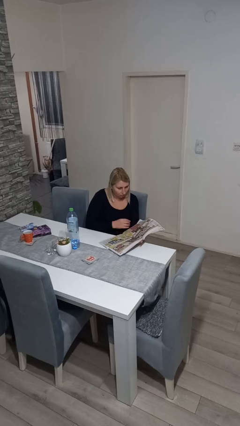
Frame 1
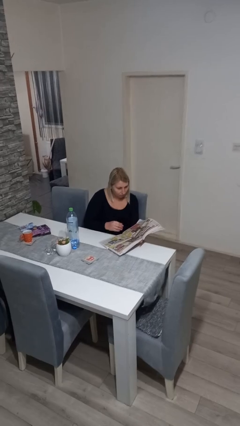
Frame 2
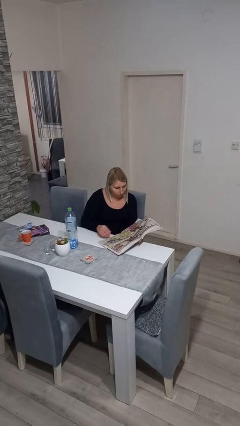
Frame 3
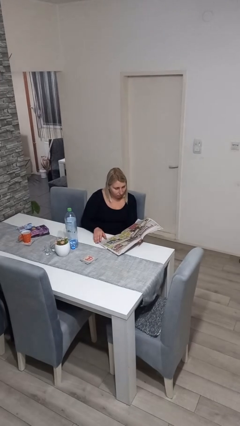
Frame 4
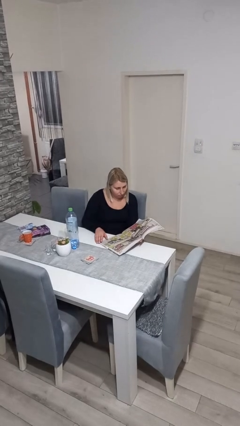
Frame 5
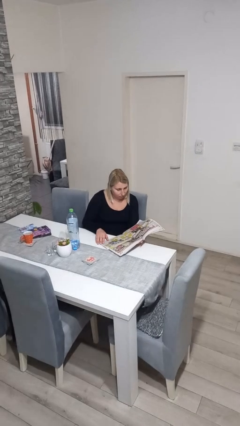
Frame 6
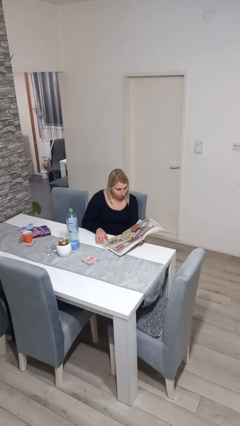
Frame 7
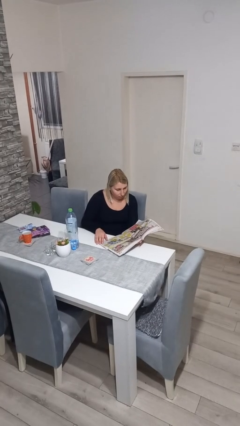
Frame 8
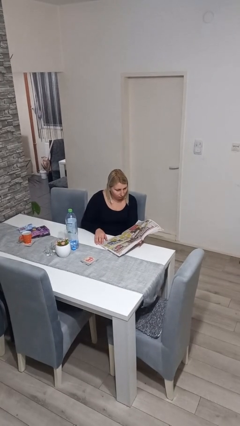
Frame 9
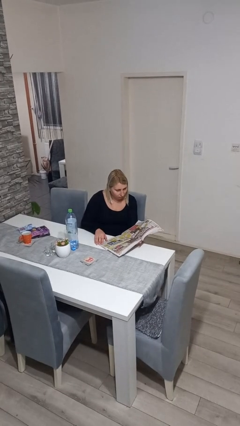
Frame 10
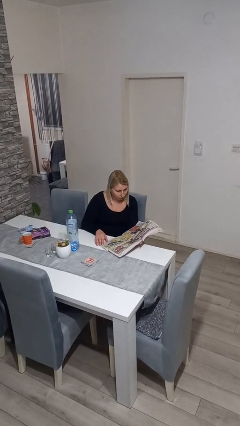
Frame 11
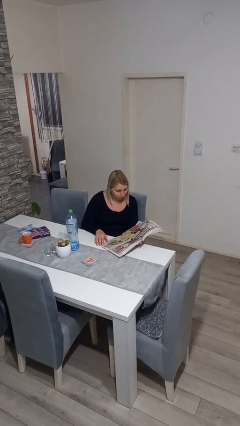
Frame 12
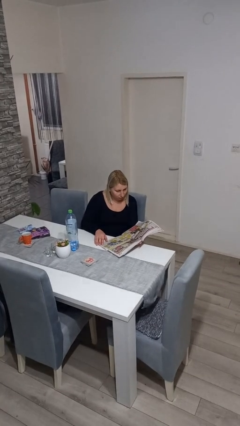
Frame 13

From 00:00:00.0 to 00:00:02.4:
person reads newspaper

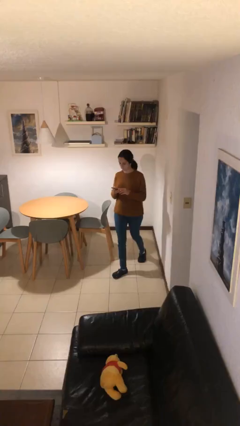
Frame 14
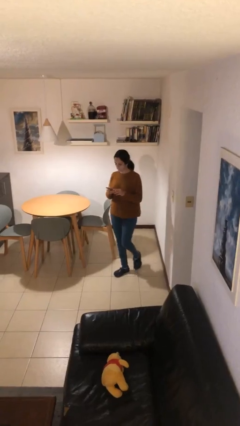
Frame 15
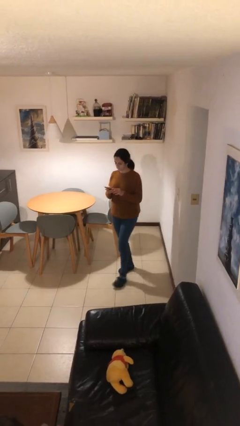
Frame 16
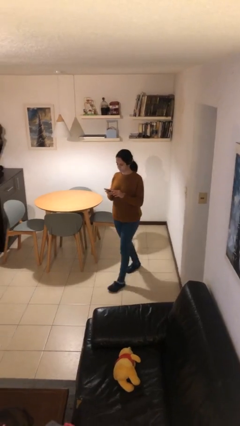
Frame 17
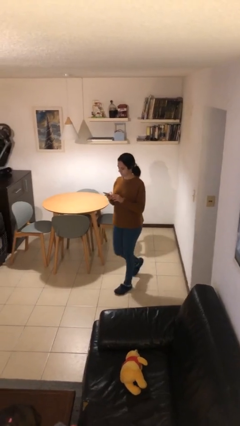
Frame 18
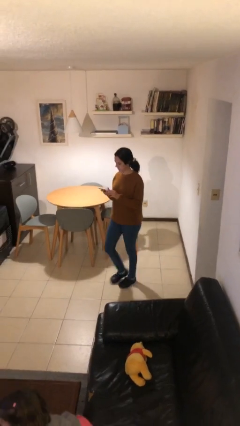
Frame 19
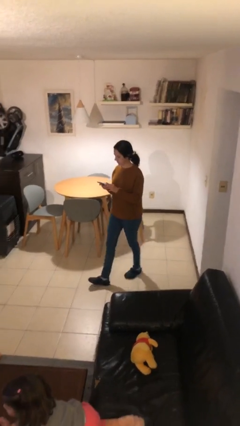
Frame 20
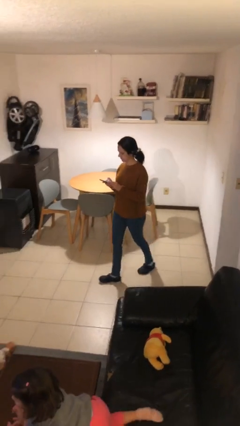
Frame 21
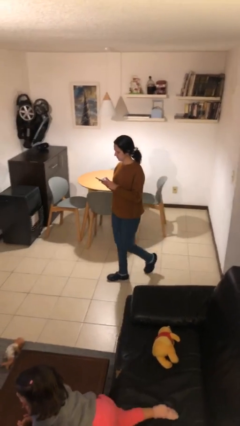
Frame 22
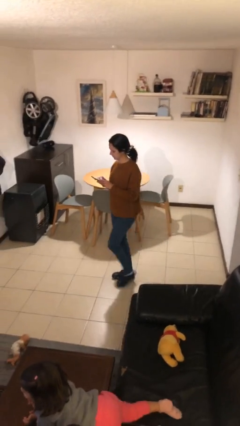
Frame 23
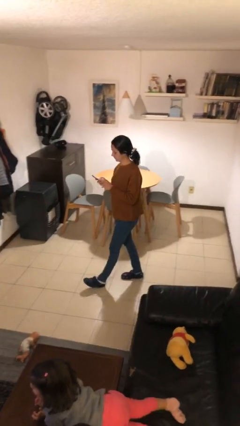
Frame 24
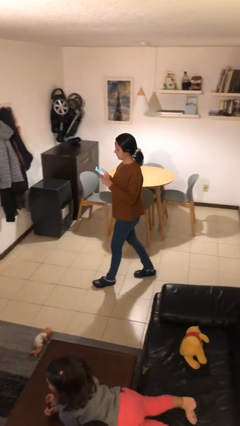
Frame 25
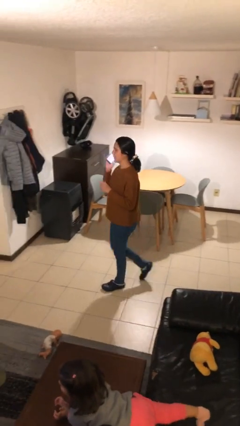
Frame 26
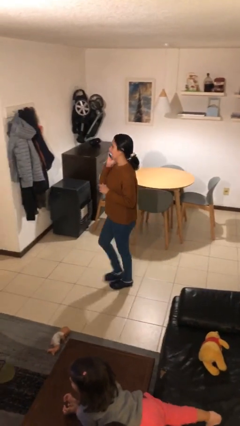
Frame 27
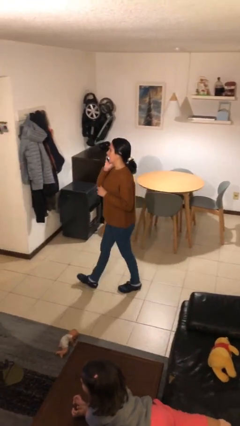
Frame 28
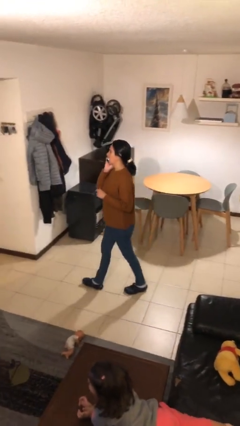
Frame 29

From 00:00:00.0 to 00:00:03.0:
person texts on phone

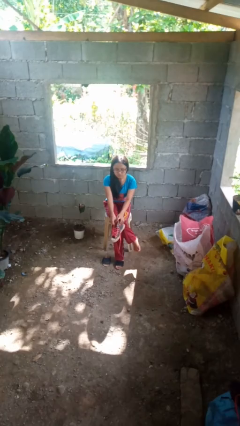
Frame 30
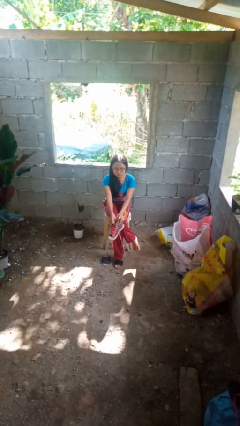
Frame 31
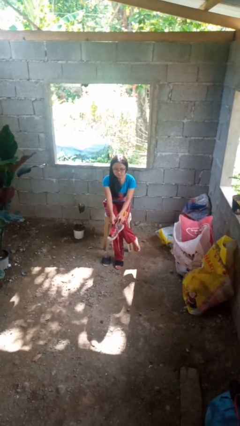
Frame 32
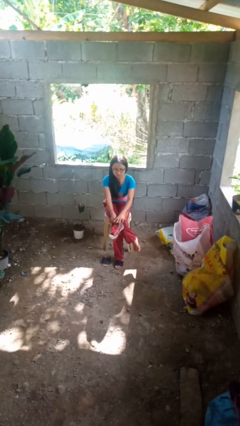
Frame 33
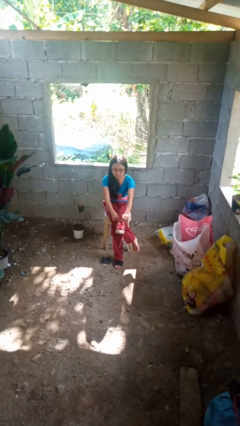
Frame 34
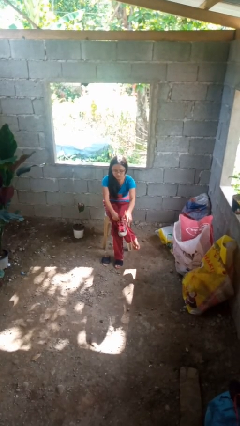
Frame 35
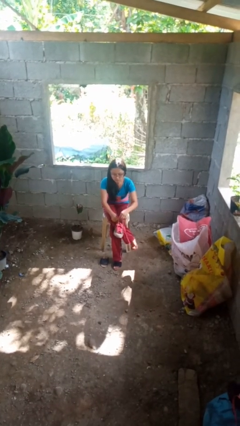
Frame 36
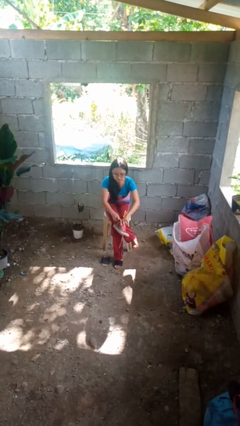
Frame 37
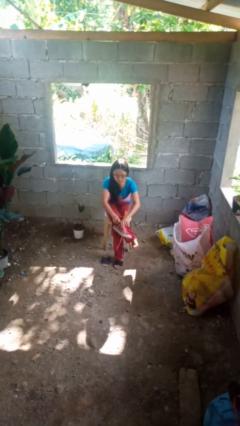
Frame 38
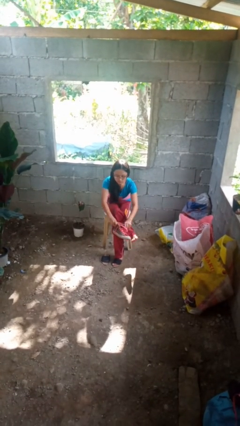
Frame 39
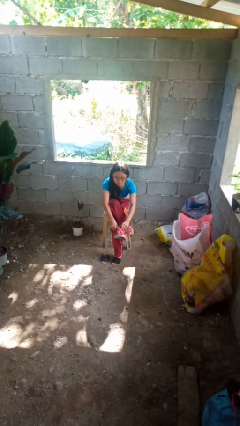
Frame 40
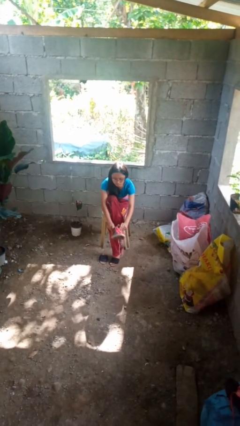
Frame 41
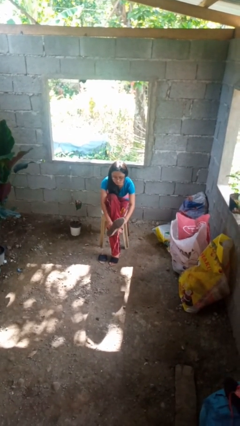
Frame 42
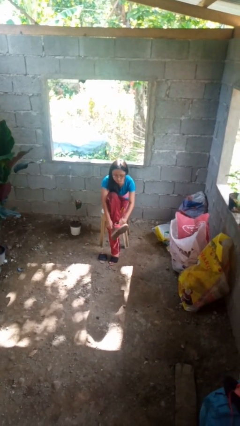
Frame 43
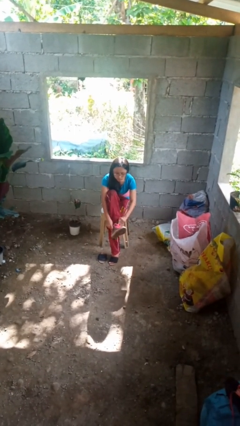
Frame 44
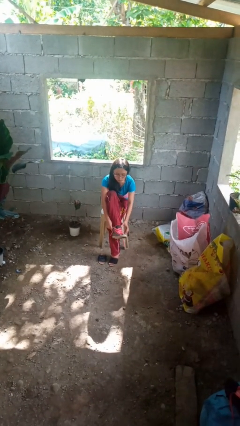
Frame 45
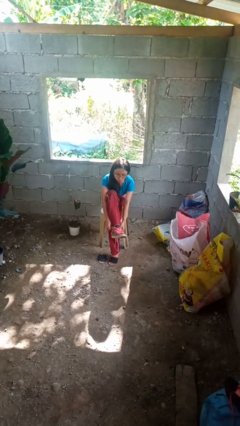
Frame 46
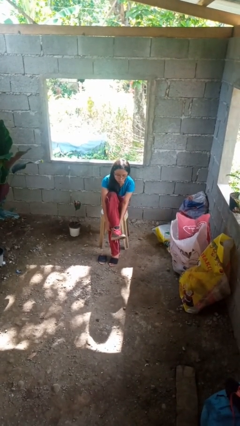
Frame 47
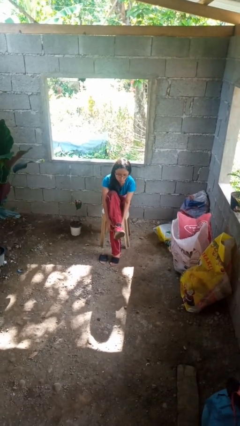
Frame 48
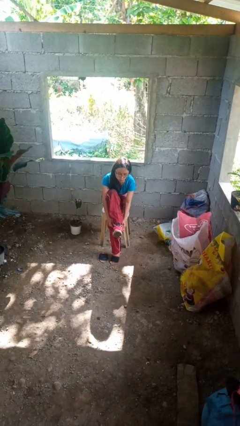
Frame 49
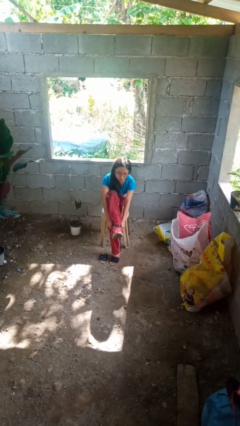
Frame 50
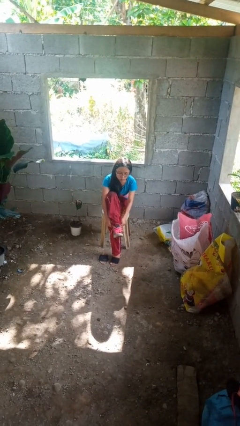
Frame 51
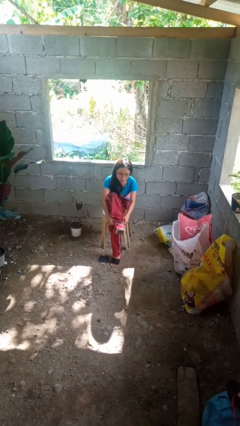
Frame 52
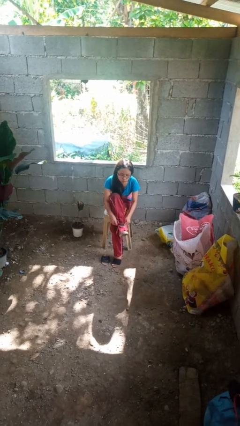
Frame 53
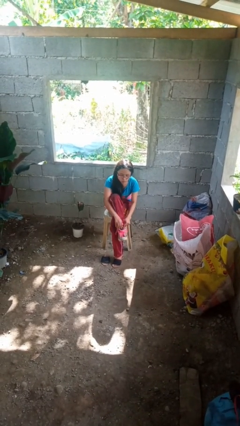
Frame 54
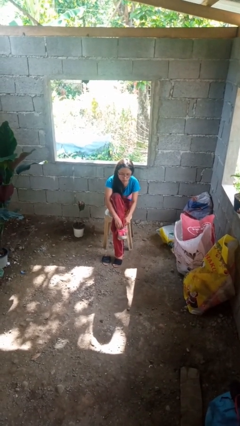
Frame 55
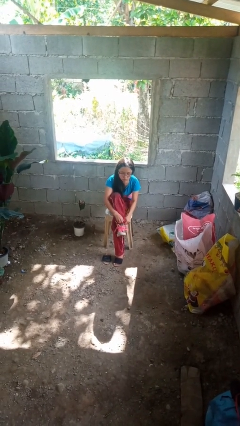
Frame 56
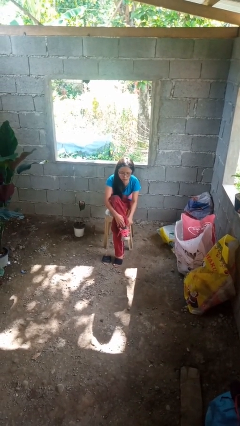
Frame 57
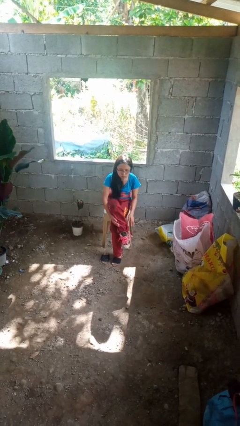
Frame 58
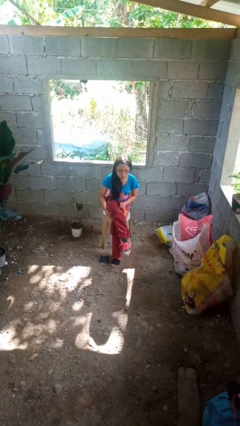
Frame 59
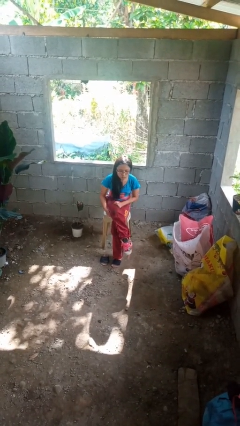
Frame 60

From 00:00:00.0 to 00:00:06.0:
person puts on shoes

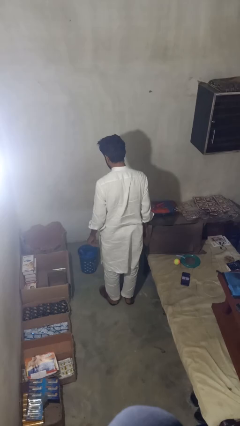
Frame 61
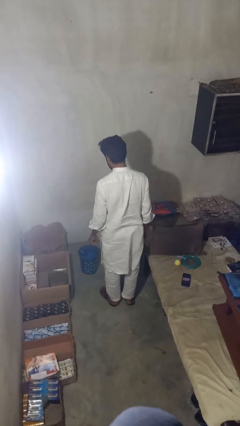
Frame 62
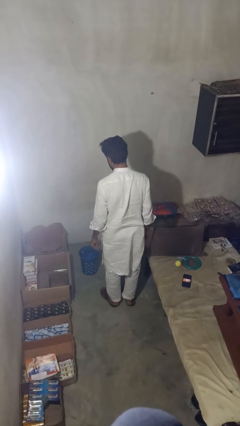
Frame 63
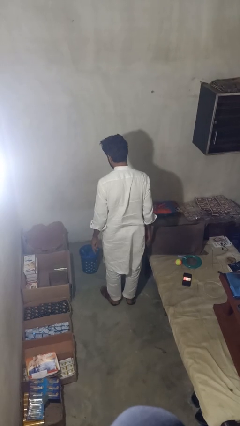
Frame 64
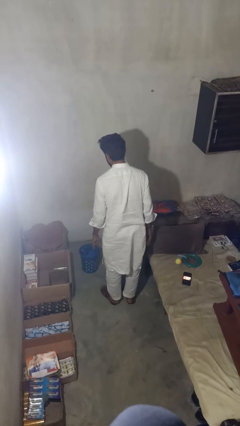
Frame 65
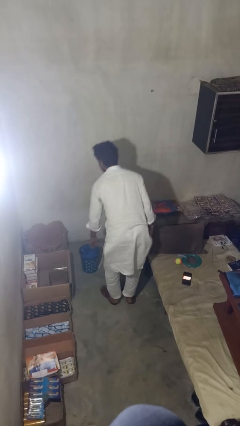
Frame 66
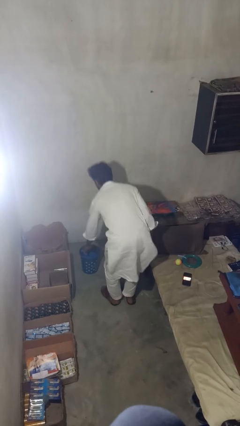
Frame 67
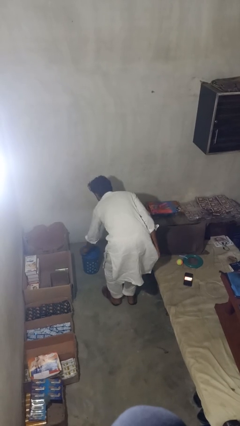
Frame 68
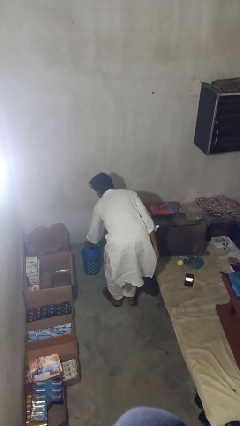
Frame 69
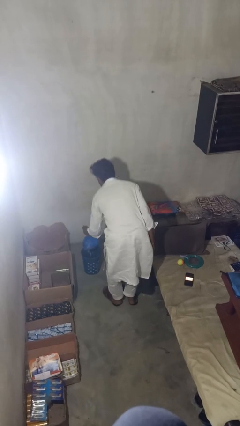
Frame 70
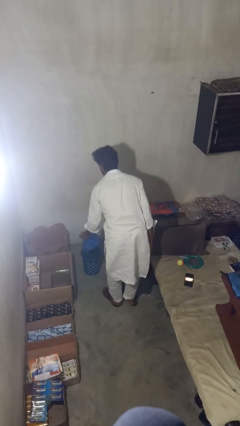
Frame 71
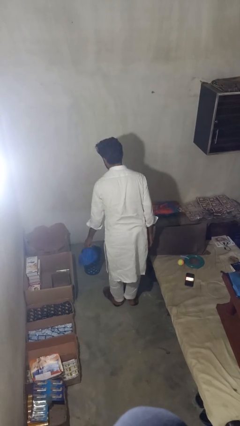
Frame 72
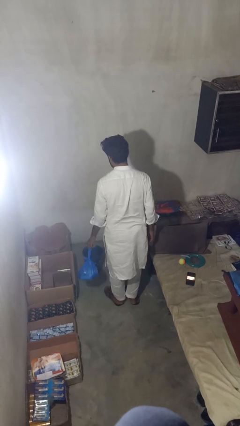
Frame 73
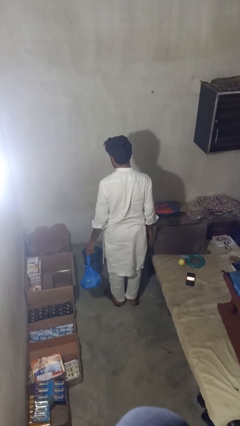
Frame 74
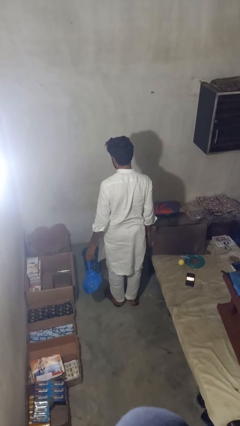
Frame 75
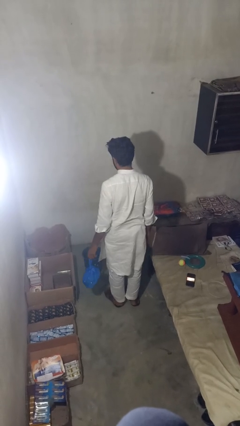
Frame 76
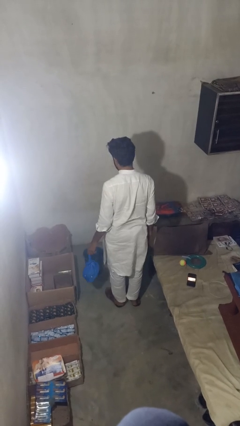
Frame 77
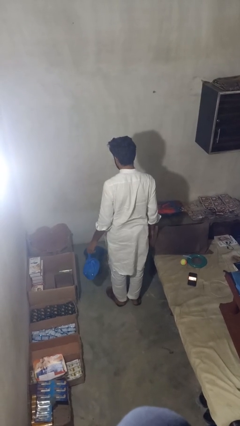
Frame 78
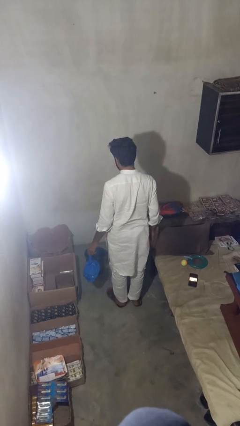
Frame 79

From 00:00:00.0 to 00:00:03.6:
person takes object from basket

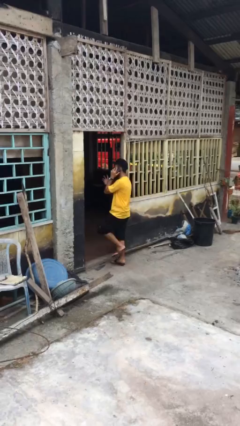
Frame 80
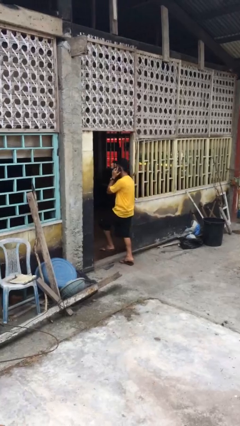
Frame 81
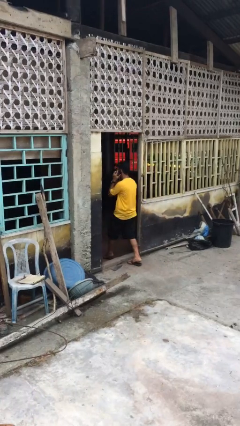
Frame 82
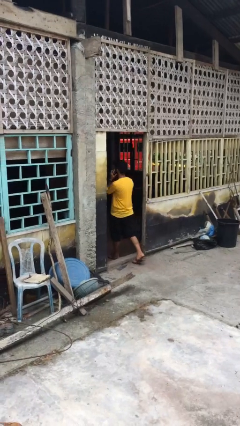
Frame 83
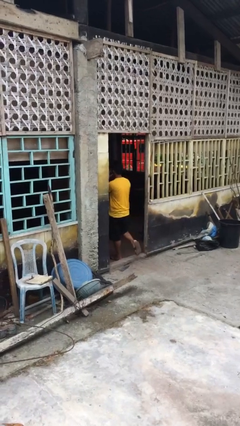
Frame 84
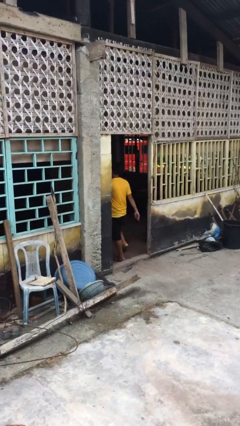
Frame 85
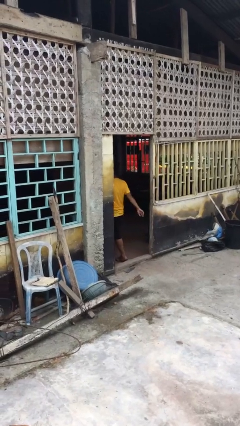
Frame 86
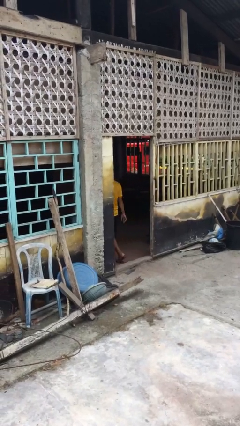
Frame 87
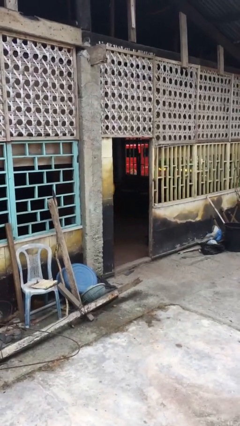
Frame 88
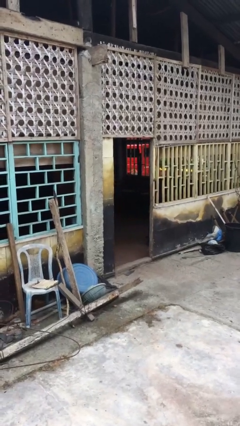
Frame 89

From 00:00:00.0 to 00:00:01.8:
person enters scene through structure

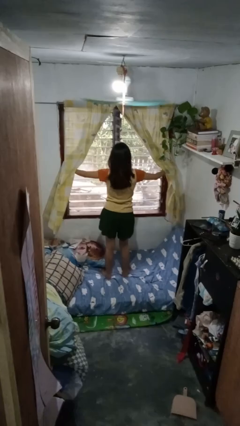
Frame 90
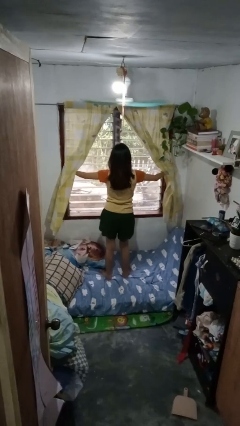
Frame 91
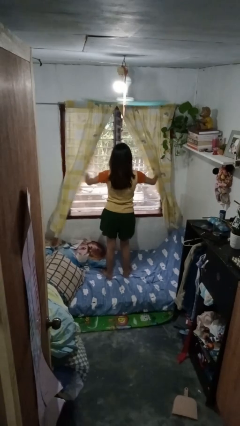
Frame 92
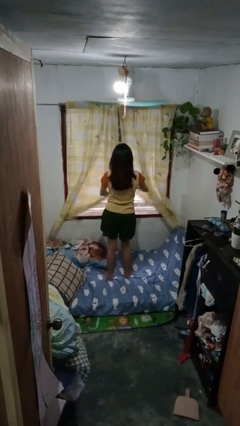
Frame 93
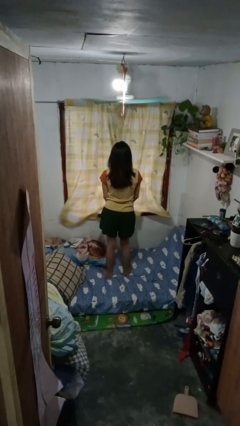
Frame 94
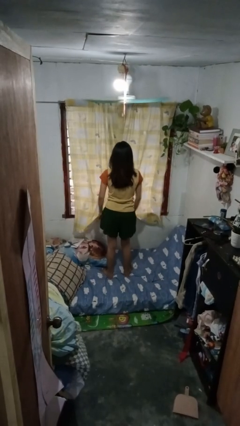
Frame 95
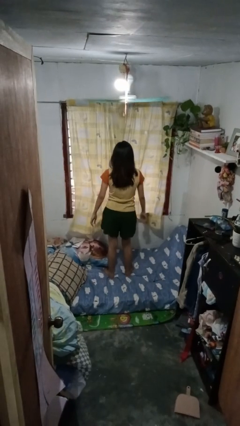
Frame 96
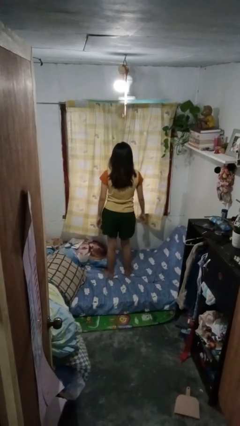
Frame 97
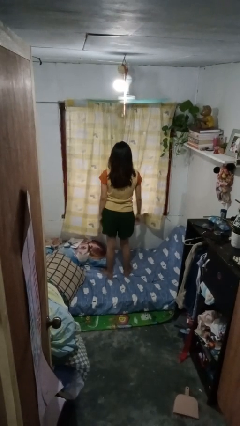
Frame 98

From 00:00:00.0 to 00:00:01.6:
person closes curtains
